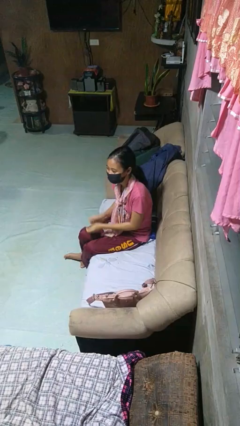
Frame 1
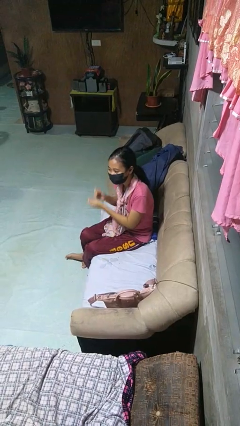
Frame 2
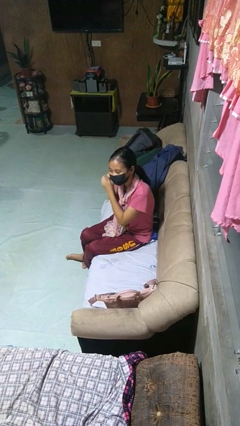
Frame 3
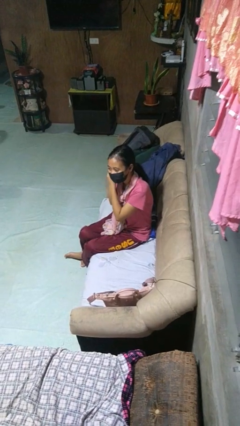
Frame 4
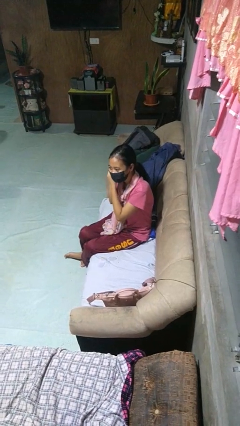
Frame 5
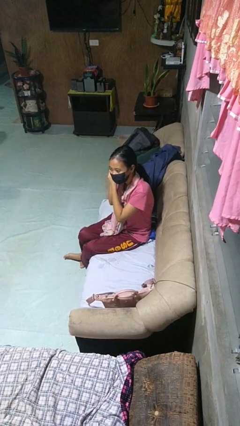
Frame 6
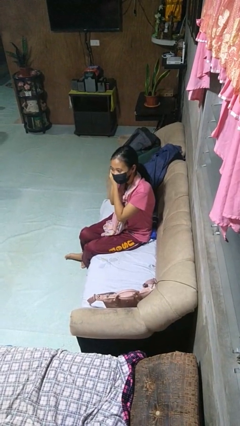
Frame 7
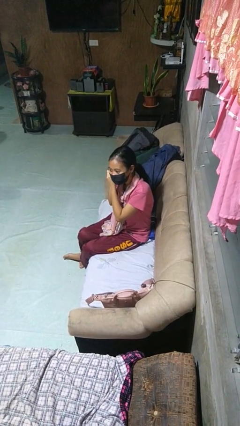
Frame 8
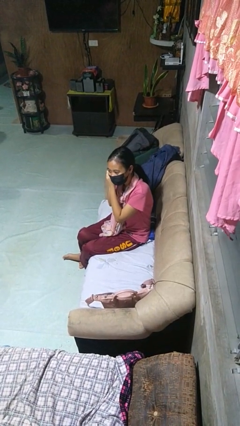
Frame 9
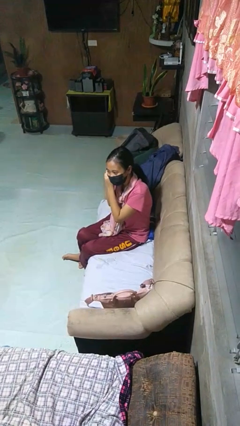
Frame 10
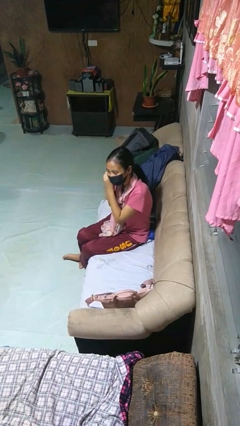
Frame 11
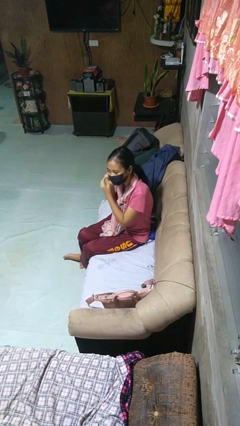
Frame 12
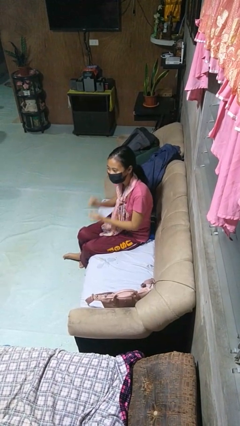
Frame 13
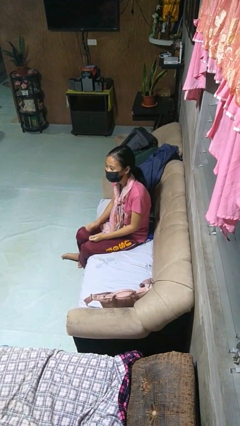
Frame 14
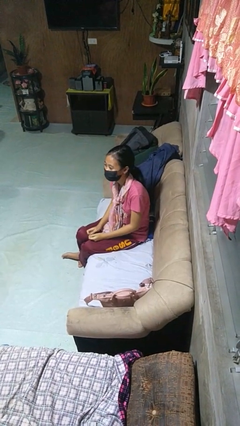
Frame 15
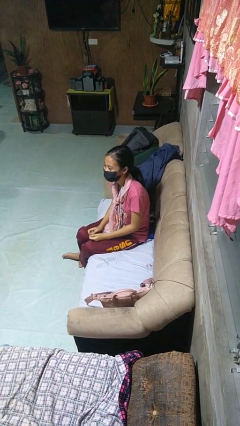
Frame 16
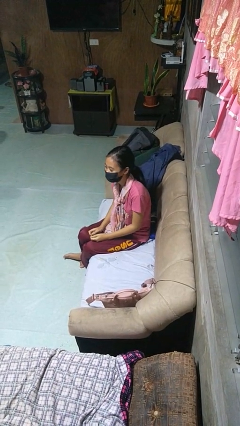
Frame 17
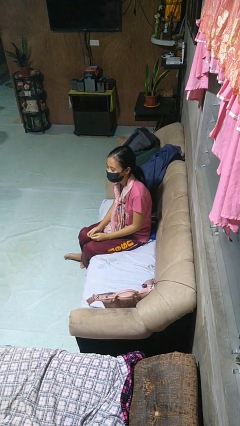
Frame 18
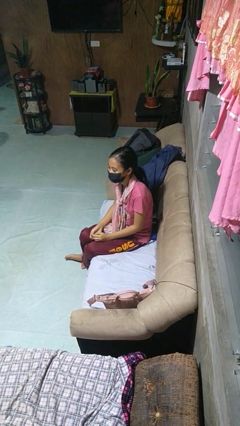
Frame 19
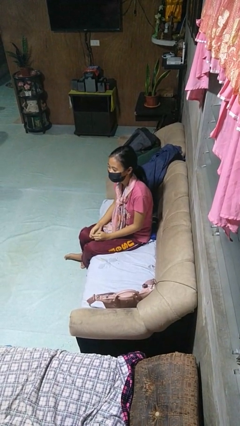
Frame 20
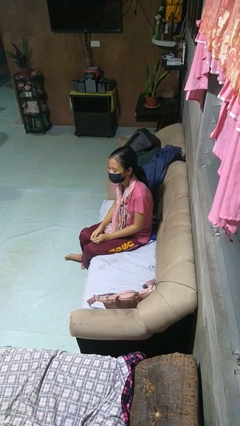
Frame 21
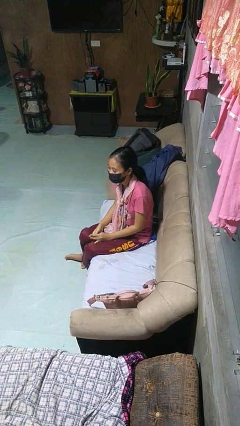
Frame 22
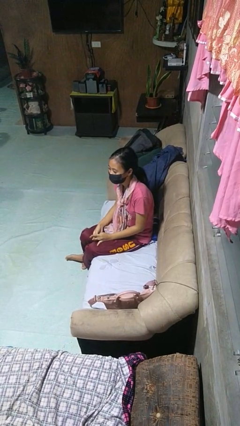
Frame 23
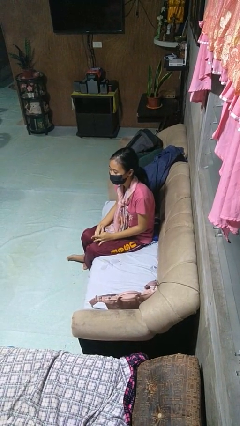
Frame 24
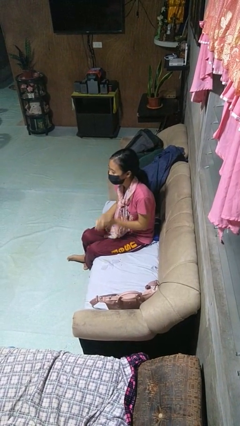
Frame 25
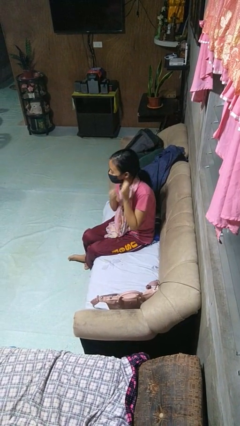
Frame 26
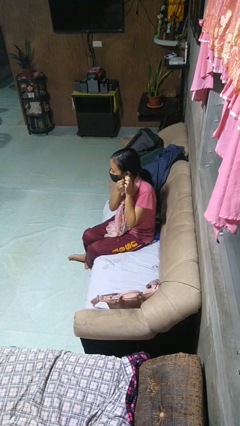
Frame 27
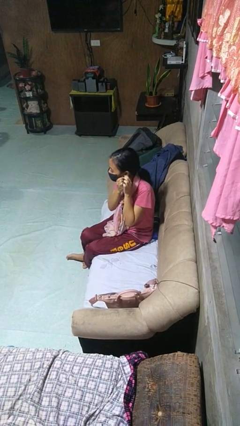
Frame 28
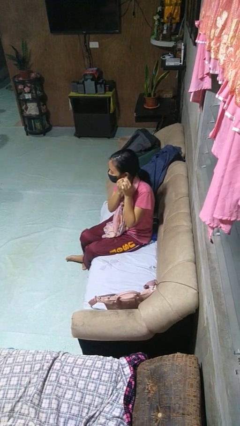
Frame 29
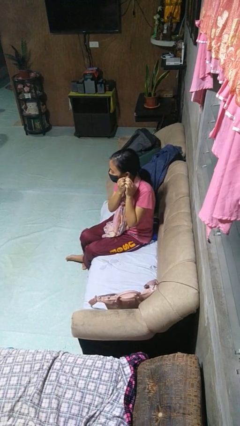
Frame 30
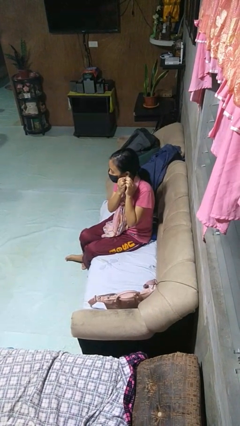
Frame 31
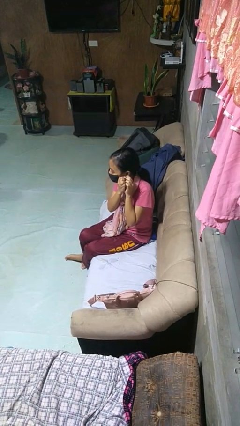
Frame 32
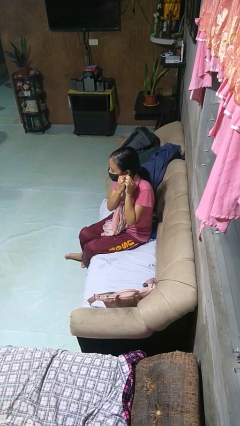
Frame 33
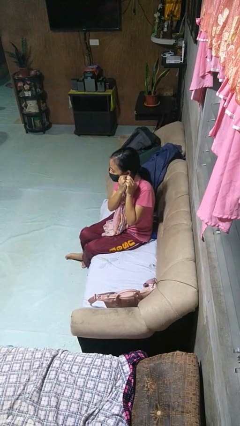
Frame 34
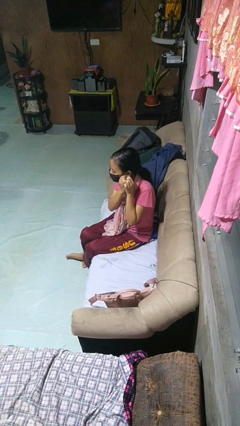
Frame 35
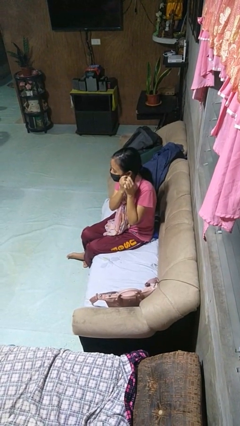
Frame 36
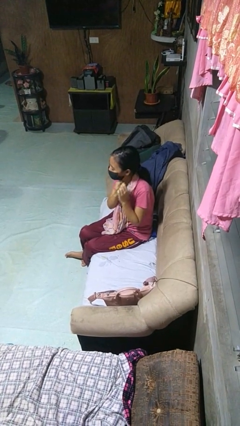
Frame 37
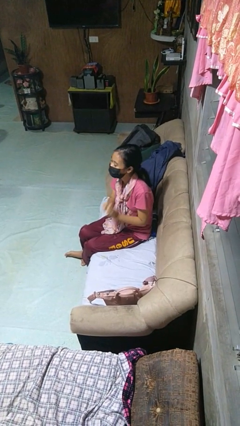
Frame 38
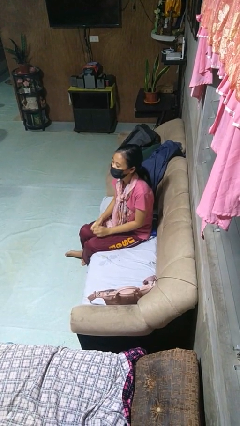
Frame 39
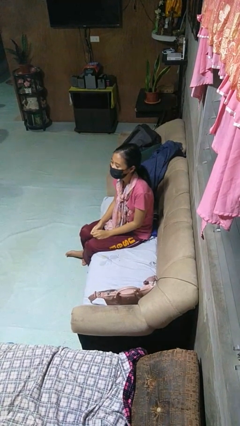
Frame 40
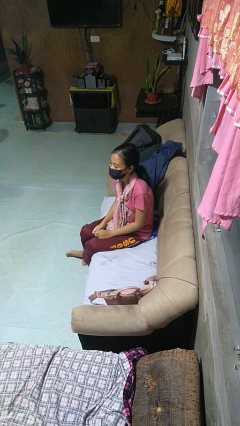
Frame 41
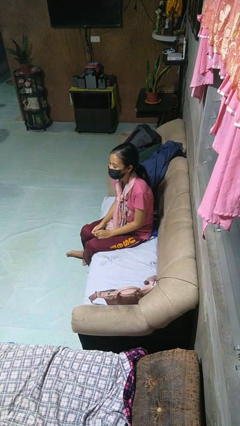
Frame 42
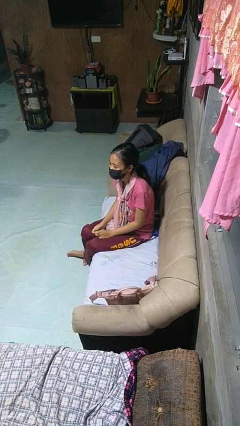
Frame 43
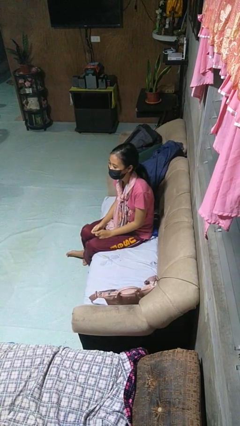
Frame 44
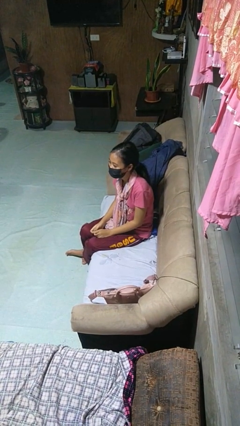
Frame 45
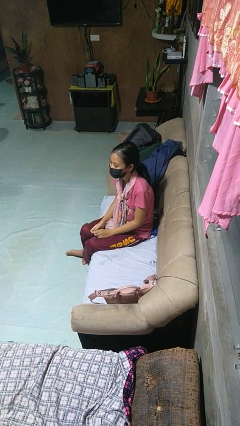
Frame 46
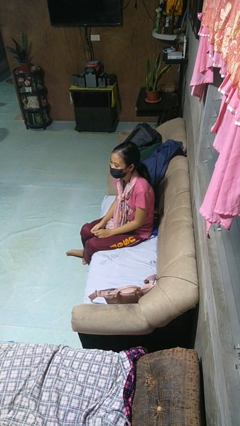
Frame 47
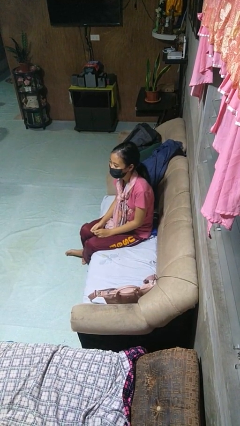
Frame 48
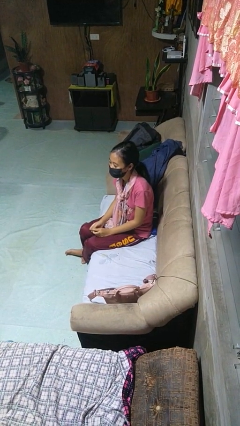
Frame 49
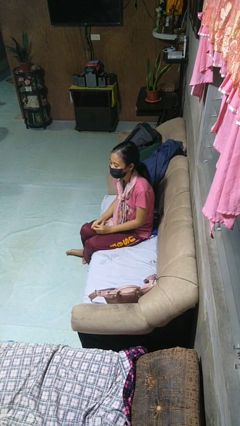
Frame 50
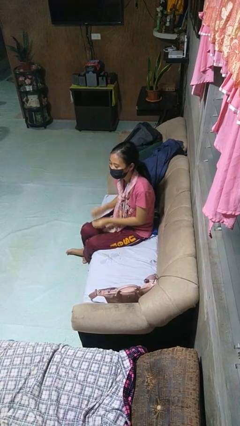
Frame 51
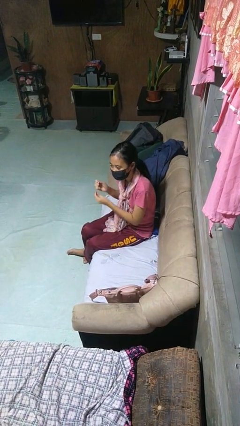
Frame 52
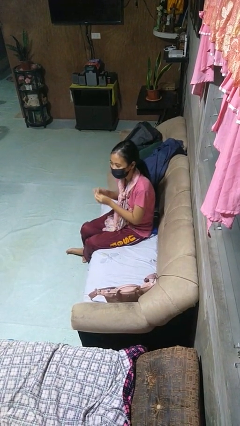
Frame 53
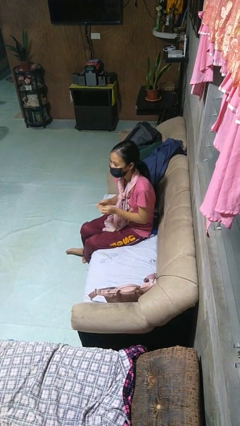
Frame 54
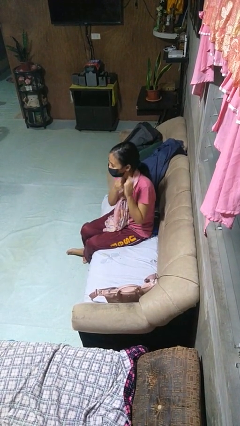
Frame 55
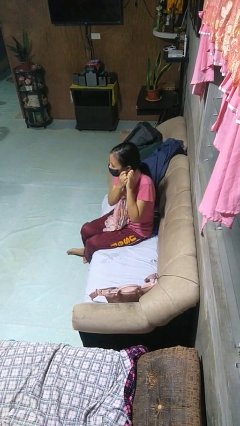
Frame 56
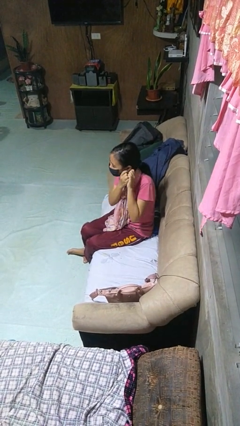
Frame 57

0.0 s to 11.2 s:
person takes off earrings

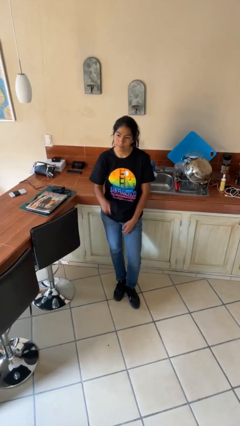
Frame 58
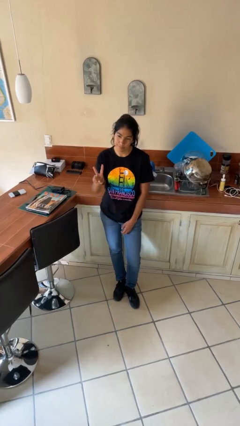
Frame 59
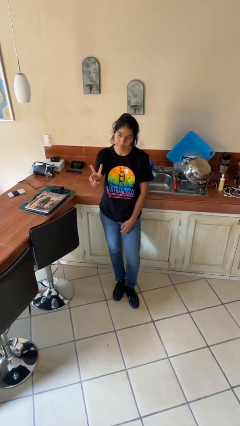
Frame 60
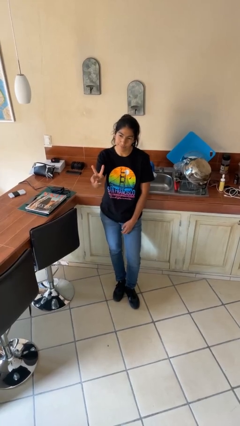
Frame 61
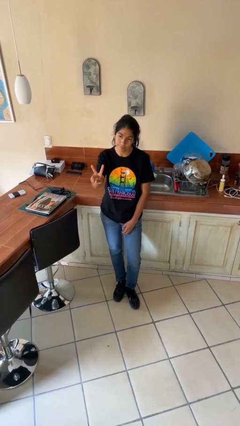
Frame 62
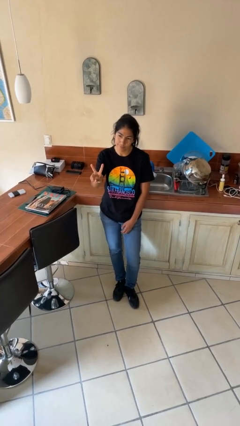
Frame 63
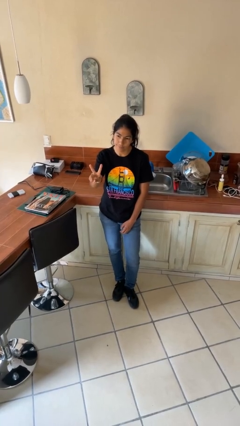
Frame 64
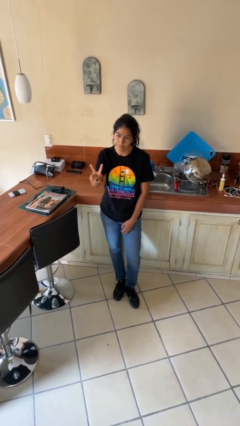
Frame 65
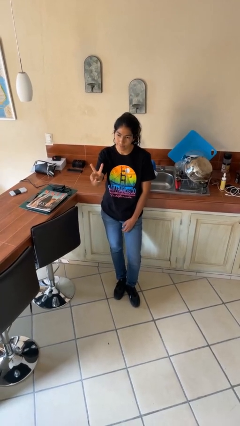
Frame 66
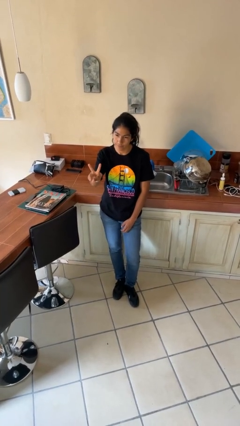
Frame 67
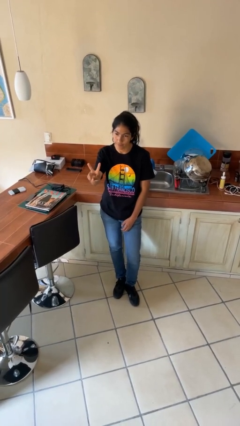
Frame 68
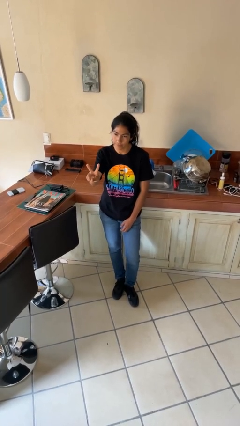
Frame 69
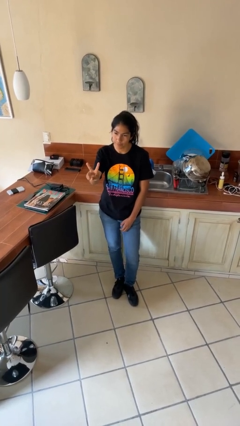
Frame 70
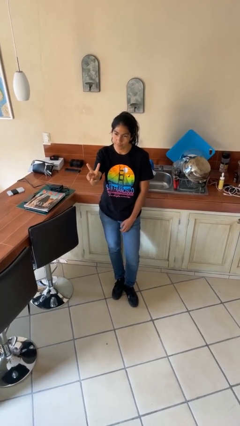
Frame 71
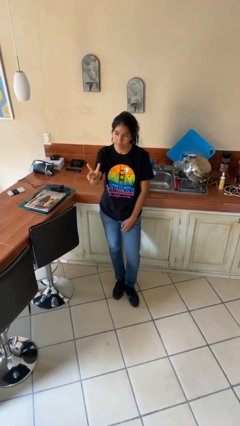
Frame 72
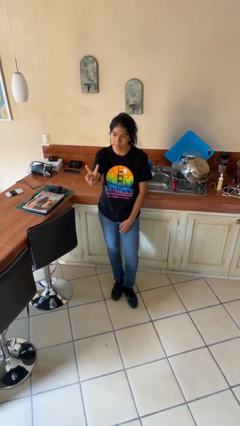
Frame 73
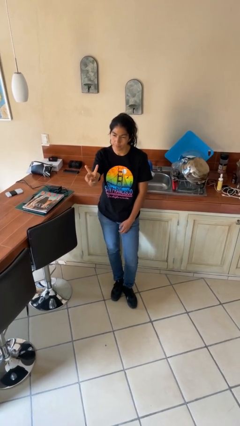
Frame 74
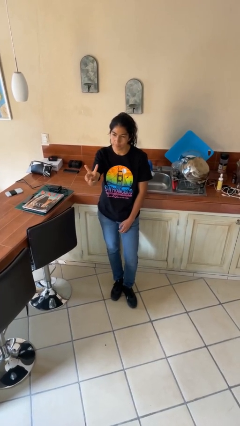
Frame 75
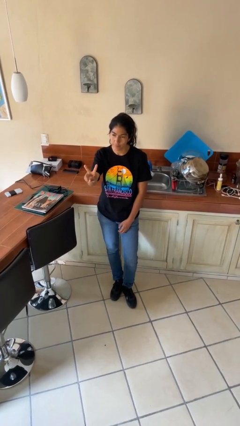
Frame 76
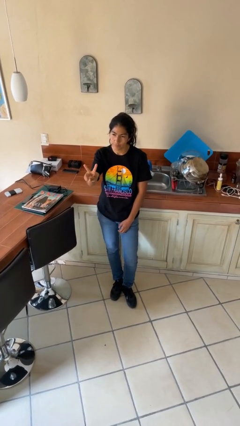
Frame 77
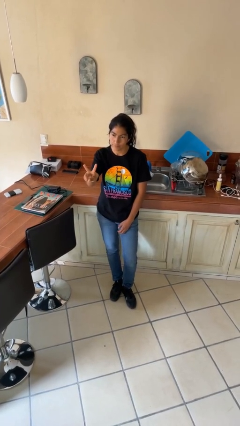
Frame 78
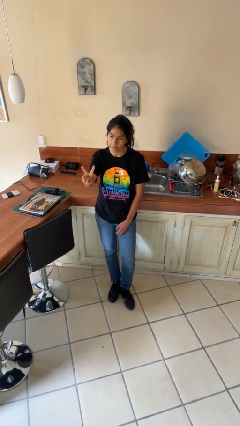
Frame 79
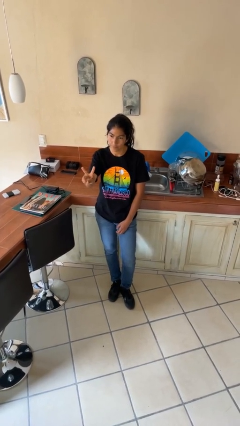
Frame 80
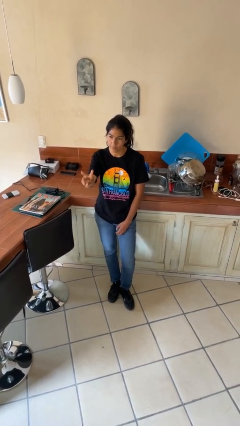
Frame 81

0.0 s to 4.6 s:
person gestures peace

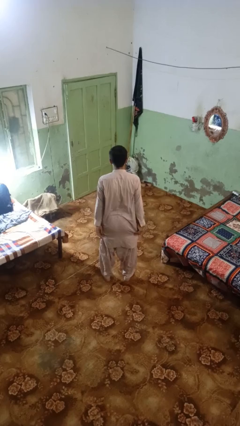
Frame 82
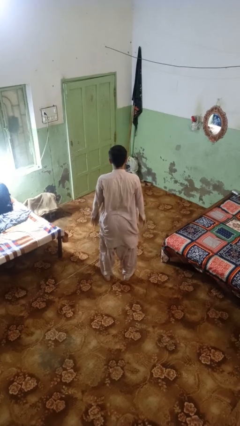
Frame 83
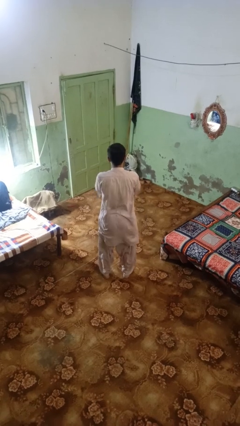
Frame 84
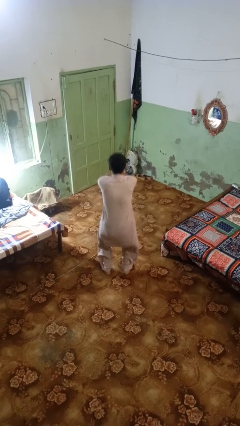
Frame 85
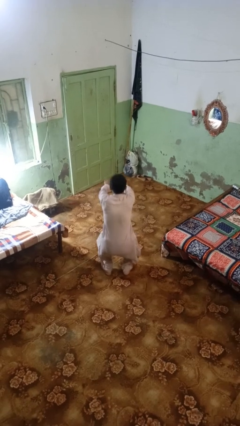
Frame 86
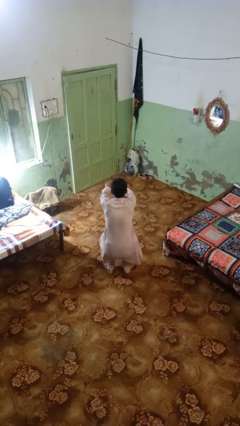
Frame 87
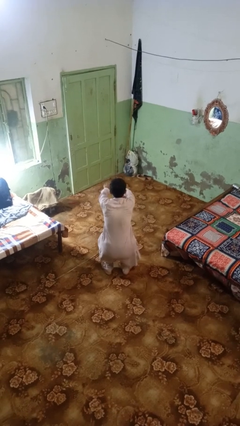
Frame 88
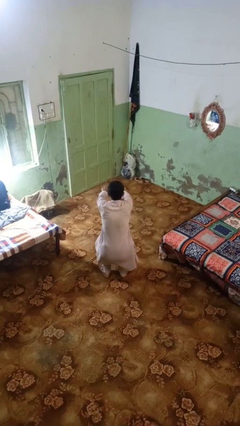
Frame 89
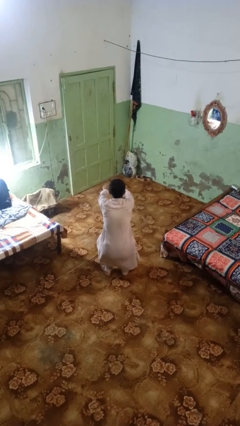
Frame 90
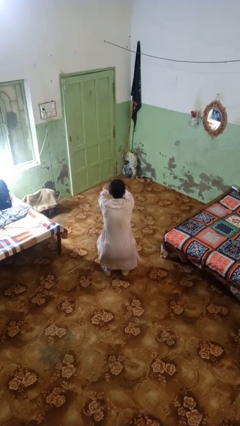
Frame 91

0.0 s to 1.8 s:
person squats

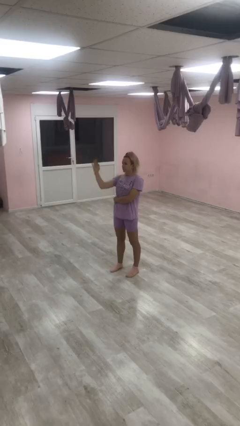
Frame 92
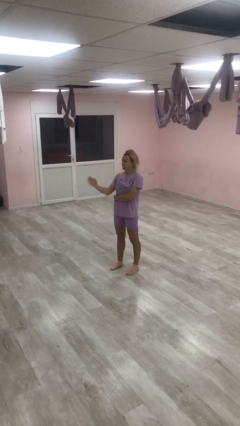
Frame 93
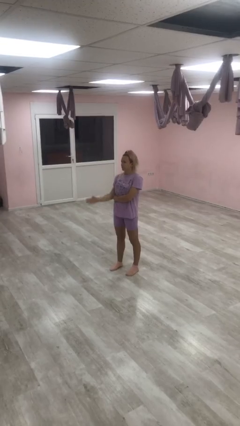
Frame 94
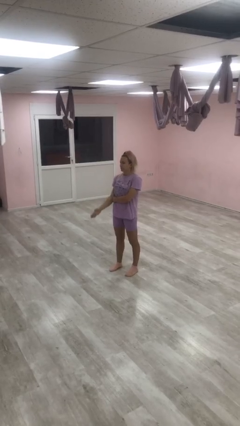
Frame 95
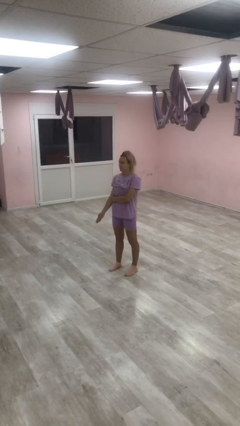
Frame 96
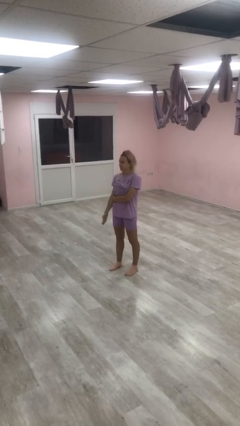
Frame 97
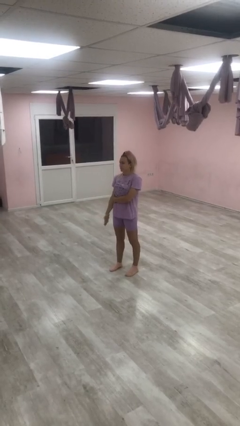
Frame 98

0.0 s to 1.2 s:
person gestures lower hand
